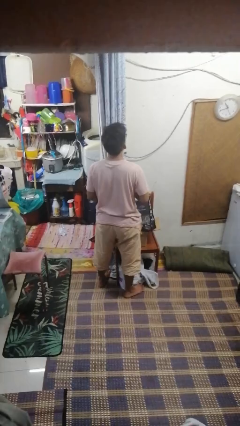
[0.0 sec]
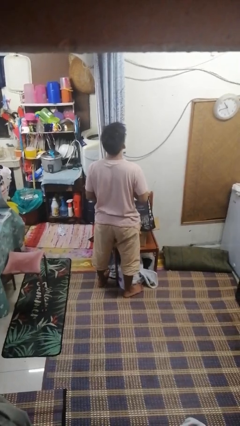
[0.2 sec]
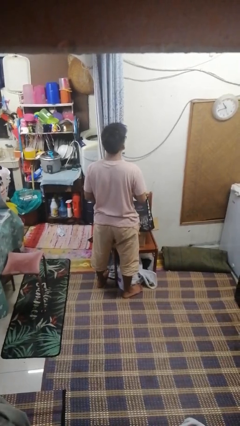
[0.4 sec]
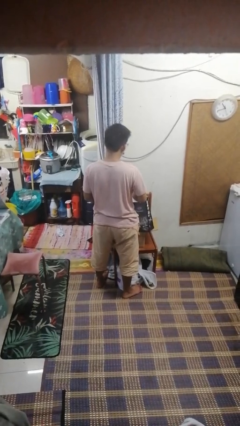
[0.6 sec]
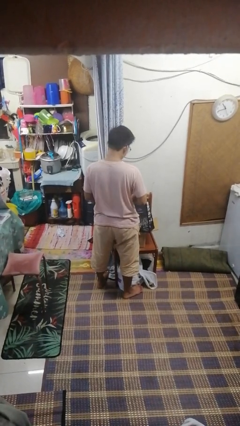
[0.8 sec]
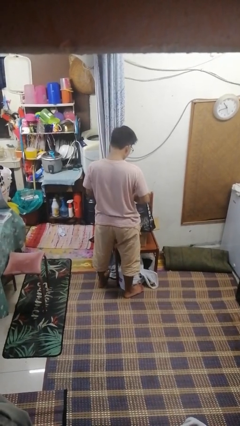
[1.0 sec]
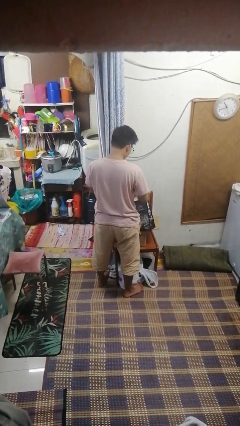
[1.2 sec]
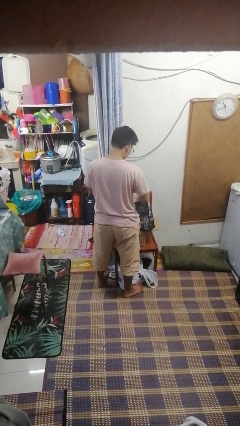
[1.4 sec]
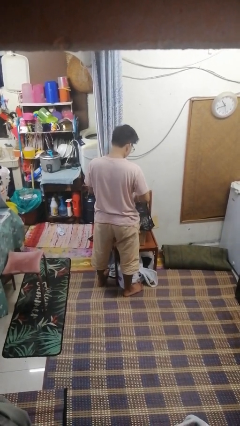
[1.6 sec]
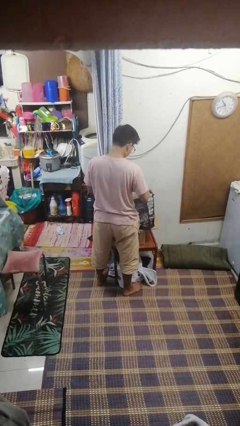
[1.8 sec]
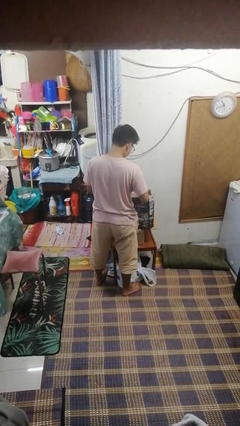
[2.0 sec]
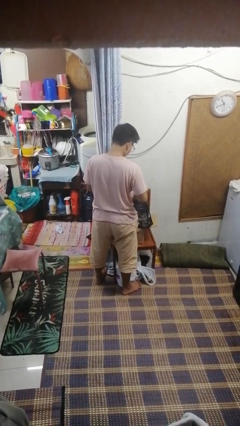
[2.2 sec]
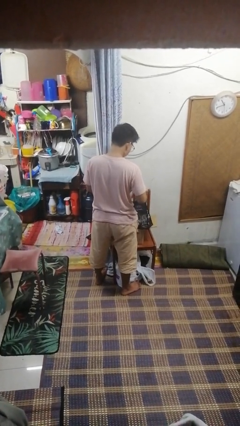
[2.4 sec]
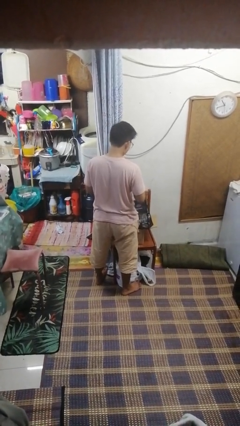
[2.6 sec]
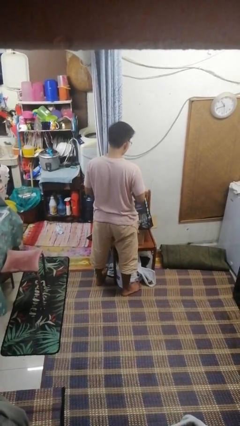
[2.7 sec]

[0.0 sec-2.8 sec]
person searches in bag

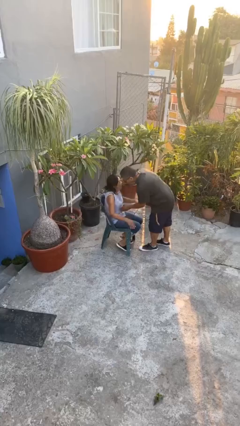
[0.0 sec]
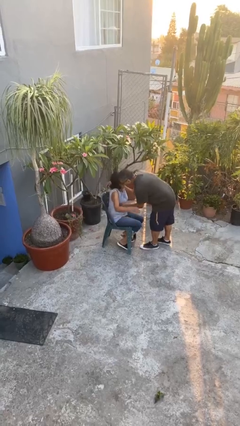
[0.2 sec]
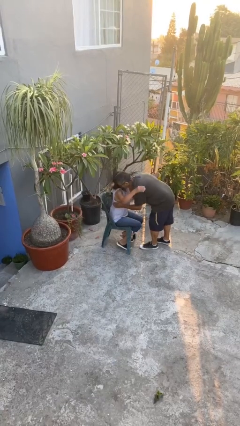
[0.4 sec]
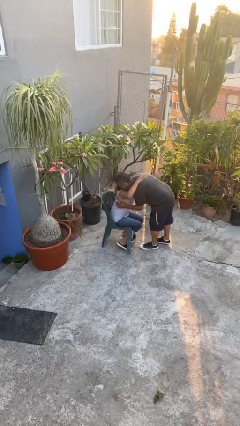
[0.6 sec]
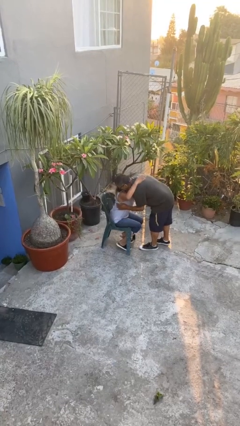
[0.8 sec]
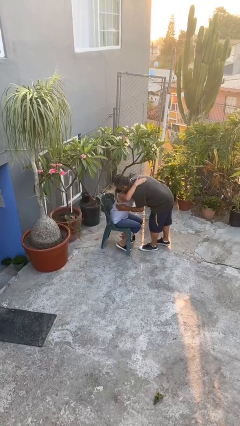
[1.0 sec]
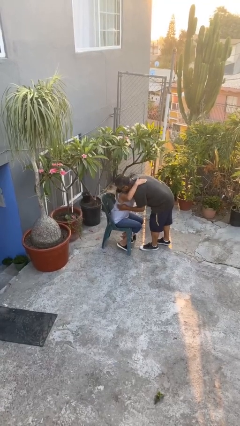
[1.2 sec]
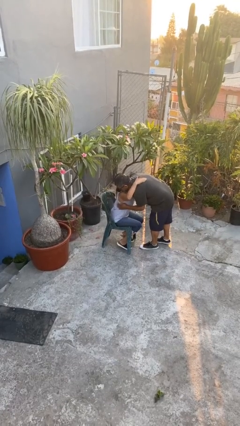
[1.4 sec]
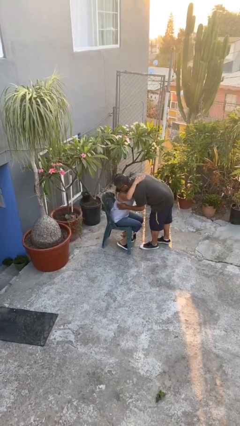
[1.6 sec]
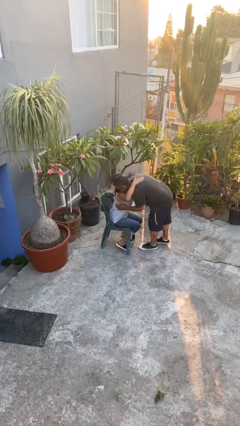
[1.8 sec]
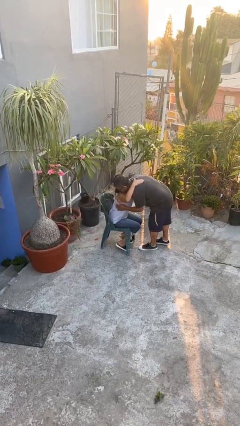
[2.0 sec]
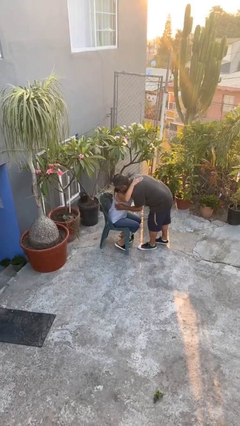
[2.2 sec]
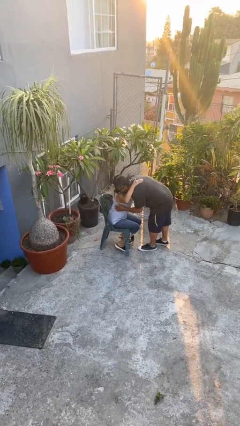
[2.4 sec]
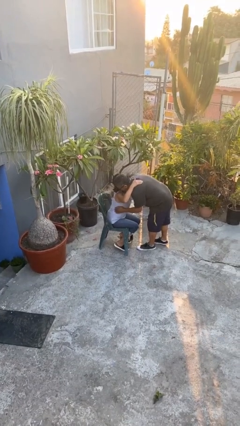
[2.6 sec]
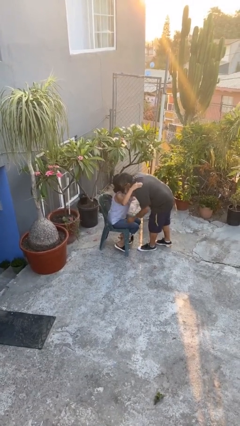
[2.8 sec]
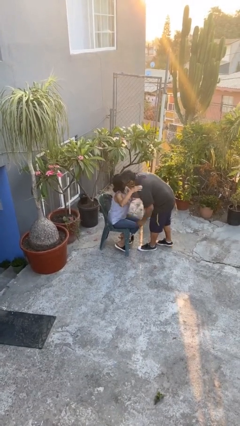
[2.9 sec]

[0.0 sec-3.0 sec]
person embraces person

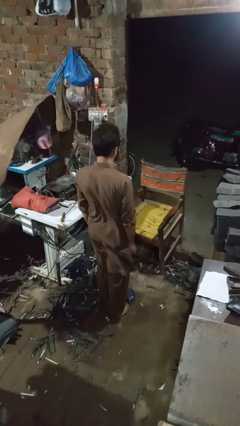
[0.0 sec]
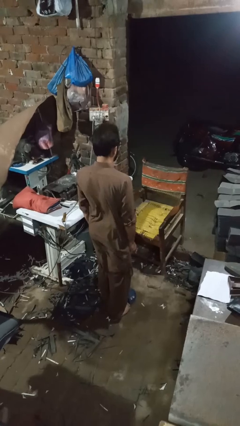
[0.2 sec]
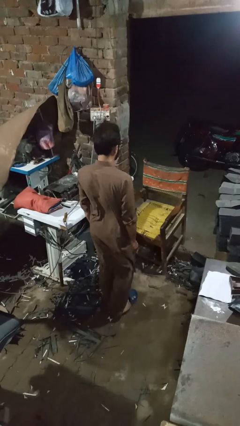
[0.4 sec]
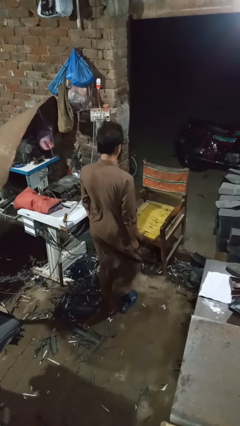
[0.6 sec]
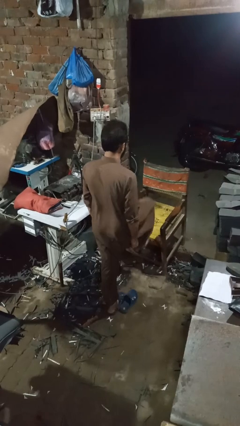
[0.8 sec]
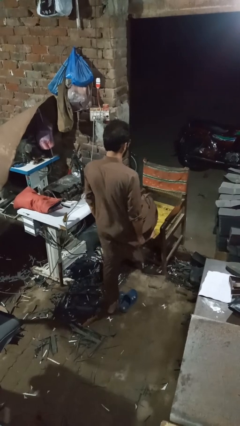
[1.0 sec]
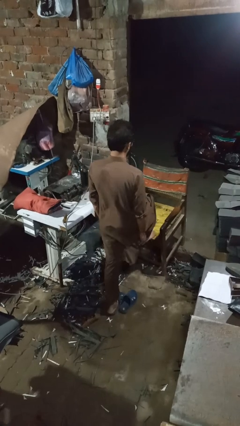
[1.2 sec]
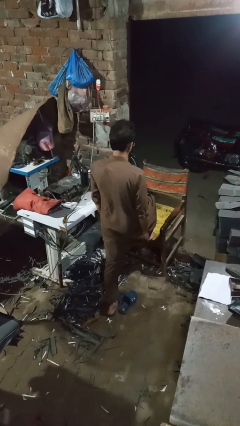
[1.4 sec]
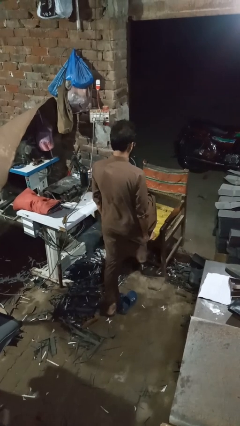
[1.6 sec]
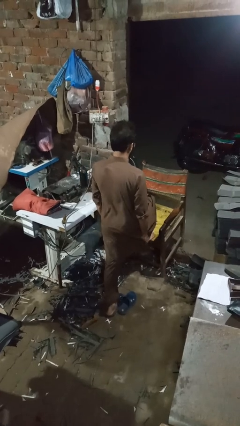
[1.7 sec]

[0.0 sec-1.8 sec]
person stubs toe

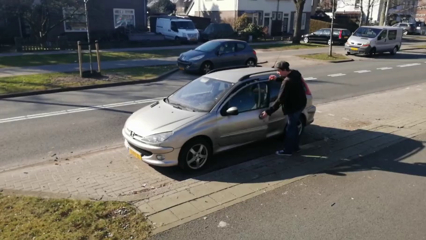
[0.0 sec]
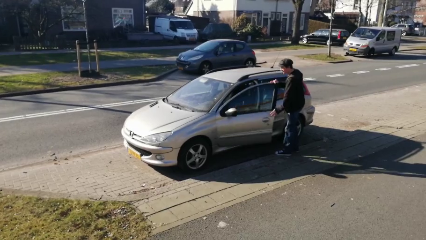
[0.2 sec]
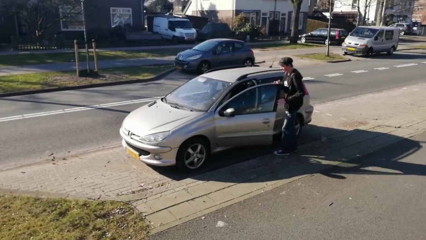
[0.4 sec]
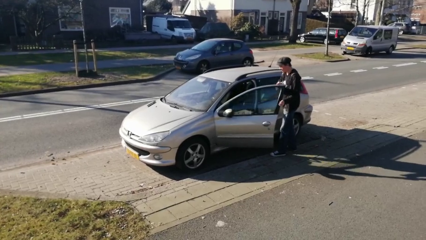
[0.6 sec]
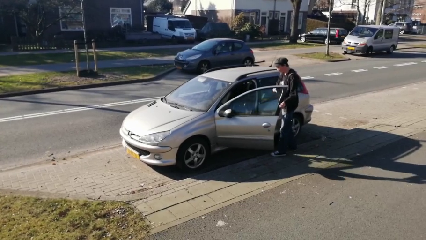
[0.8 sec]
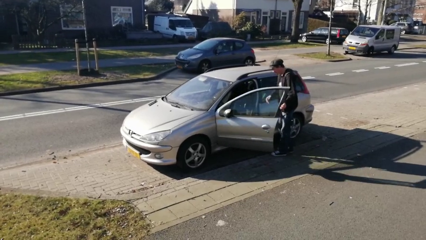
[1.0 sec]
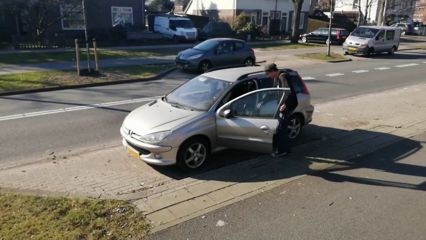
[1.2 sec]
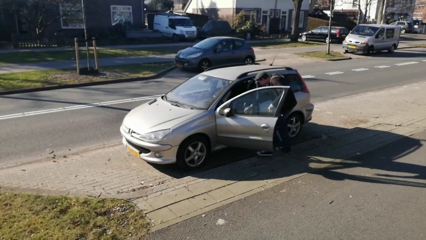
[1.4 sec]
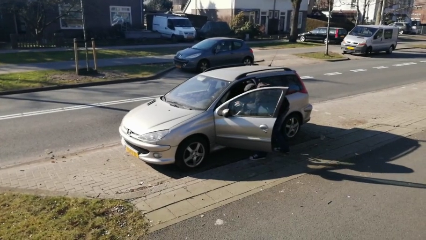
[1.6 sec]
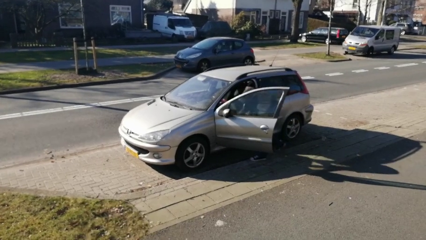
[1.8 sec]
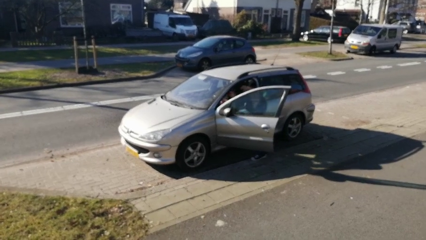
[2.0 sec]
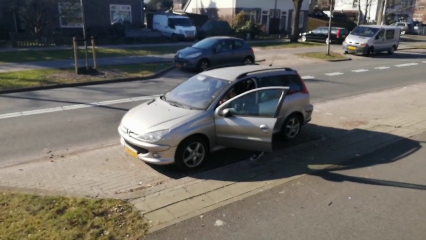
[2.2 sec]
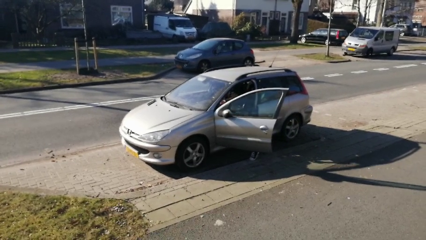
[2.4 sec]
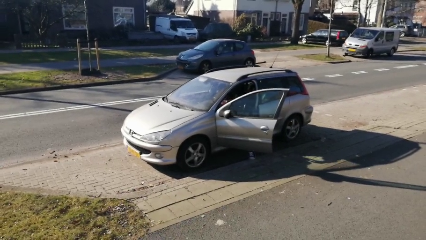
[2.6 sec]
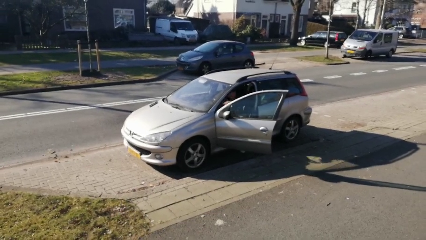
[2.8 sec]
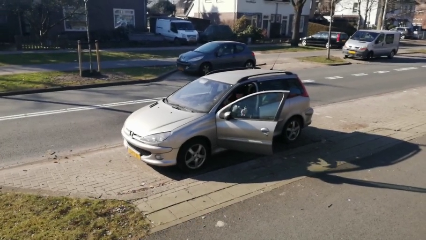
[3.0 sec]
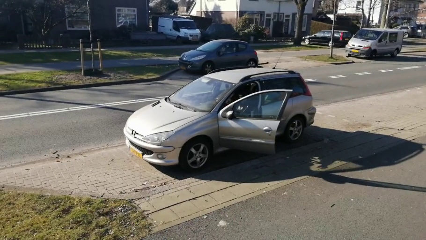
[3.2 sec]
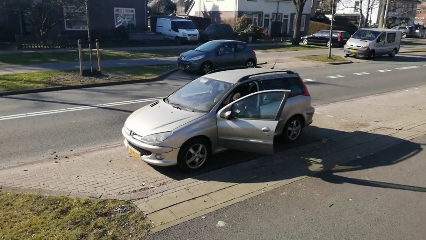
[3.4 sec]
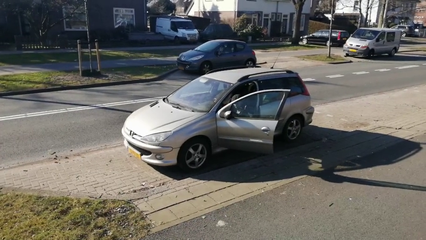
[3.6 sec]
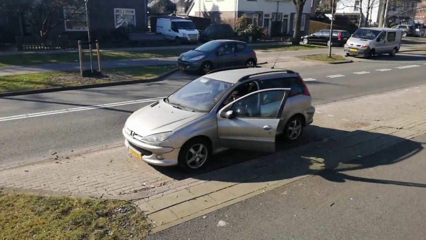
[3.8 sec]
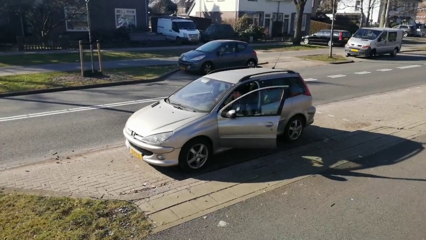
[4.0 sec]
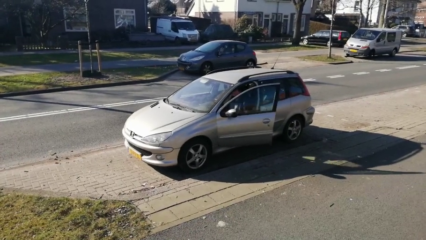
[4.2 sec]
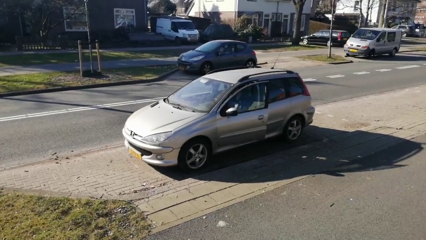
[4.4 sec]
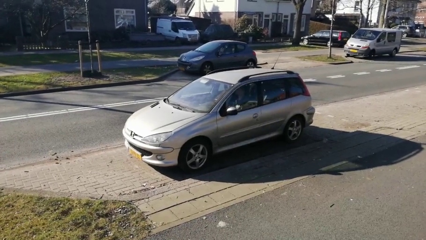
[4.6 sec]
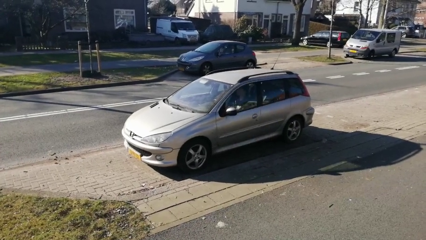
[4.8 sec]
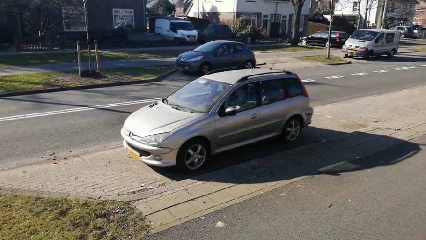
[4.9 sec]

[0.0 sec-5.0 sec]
car picks up person

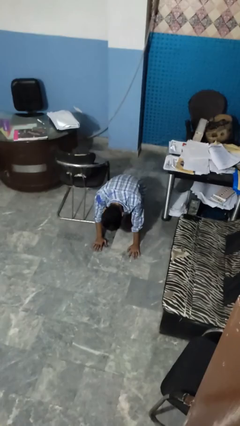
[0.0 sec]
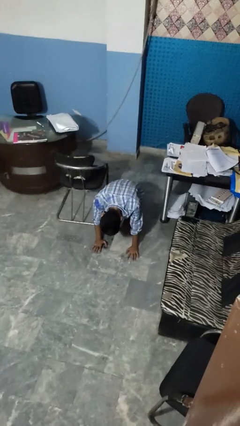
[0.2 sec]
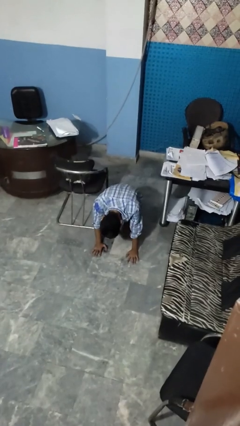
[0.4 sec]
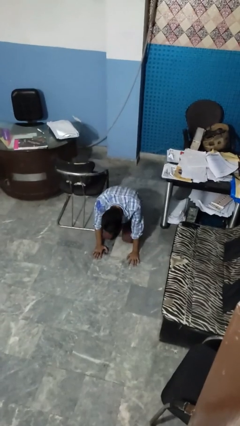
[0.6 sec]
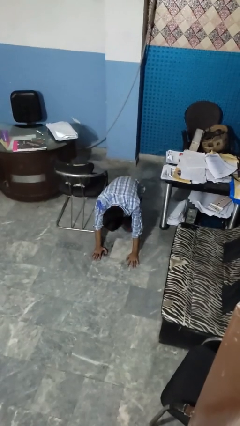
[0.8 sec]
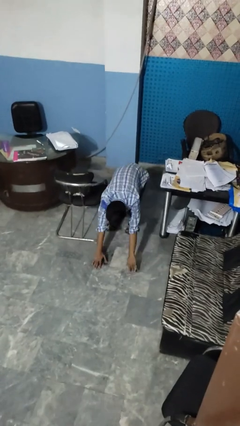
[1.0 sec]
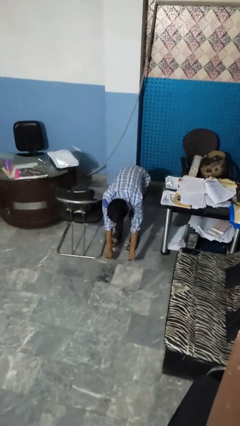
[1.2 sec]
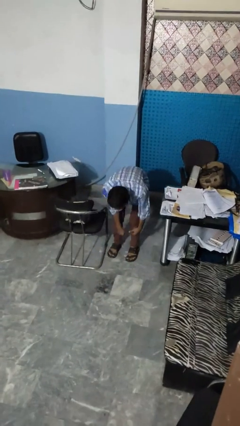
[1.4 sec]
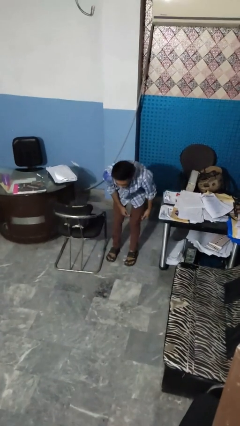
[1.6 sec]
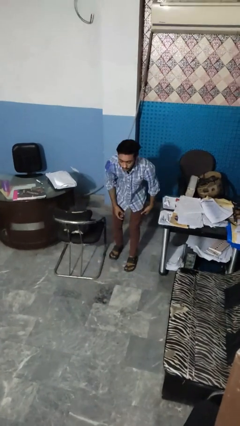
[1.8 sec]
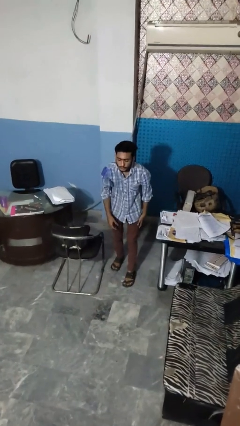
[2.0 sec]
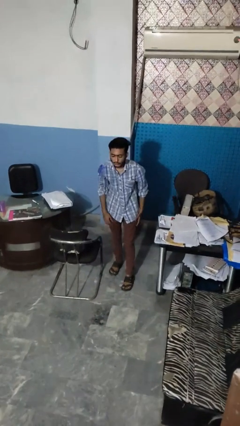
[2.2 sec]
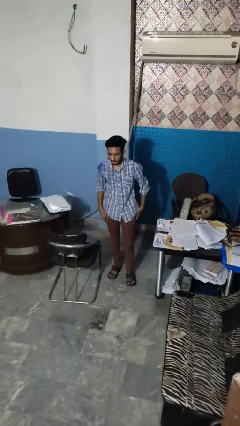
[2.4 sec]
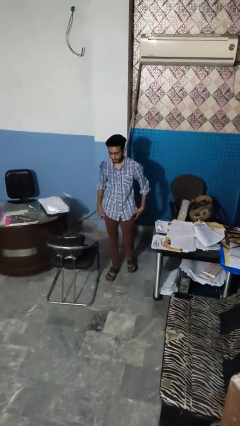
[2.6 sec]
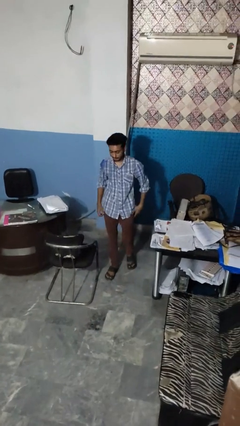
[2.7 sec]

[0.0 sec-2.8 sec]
person stands up from floor

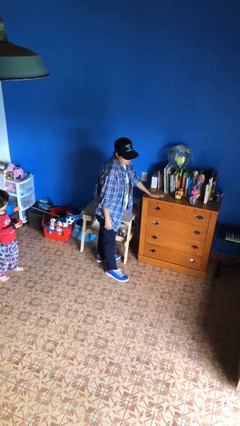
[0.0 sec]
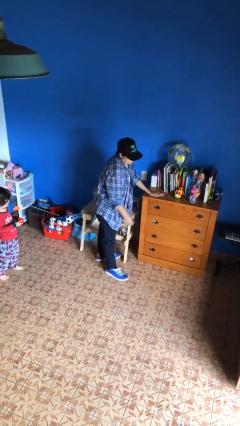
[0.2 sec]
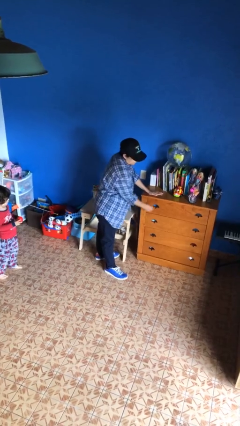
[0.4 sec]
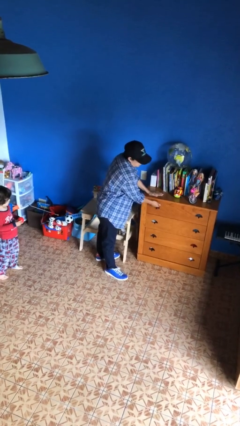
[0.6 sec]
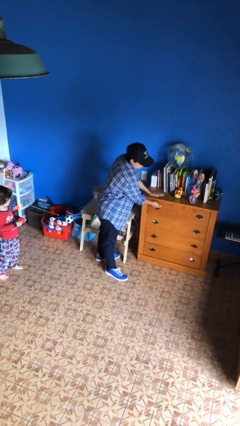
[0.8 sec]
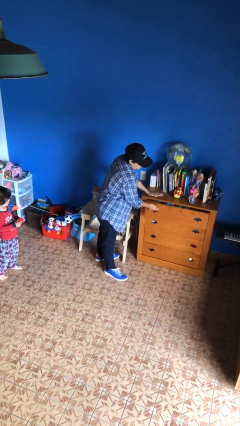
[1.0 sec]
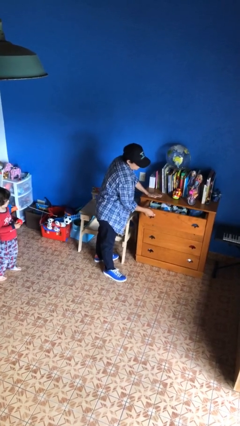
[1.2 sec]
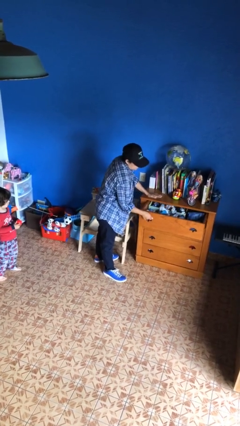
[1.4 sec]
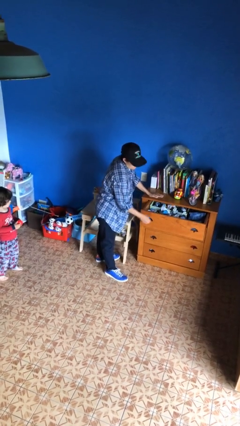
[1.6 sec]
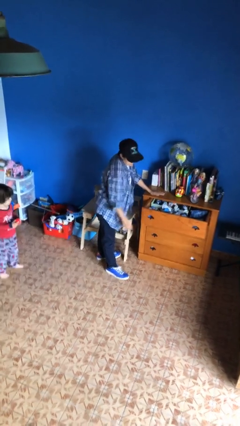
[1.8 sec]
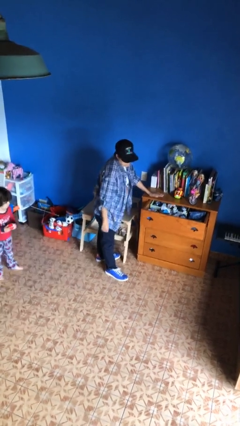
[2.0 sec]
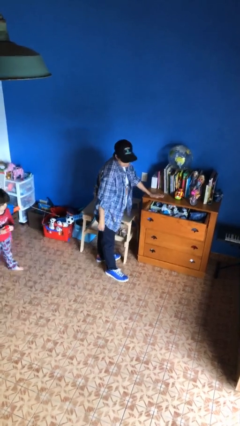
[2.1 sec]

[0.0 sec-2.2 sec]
person opens dresser drawer
